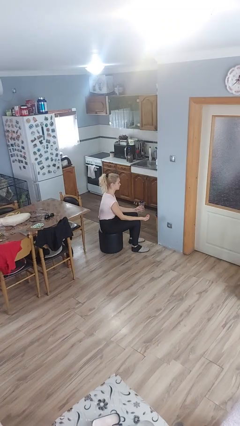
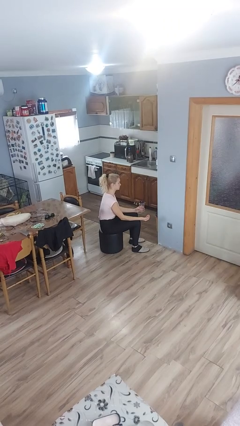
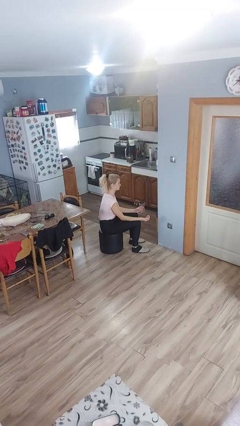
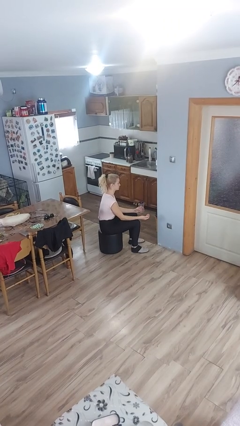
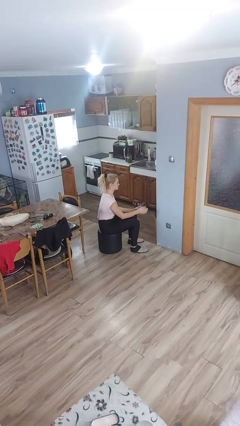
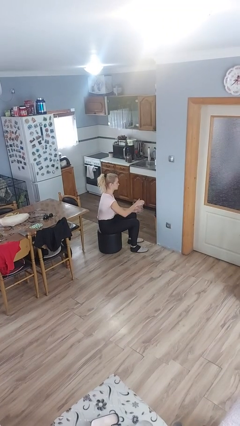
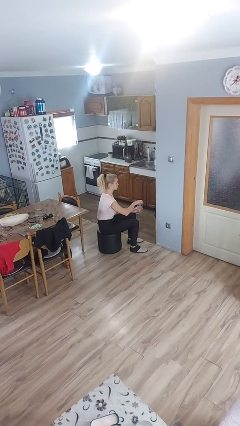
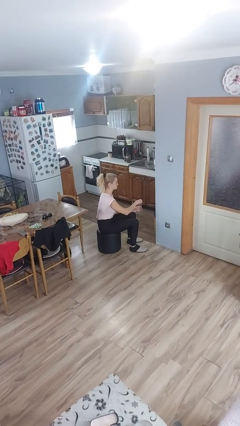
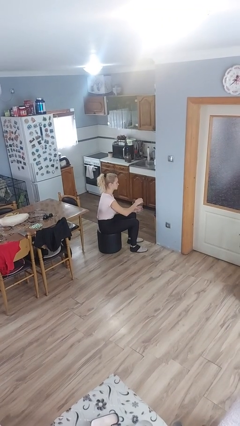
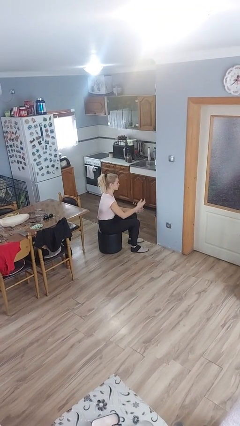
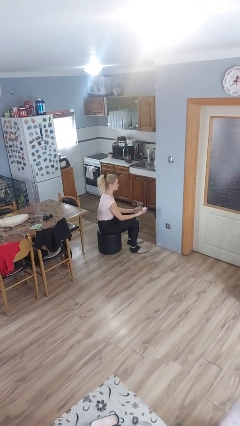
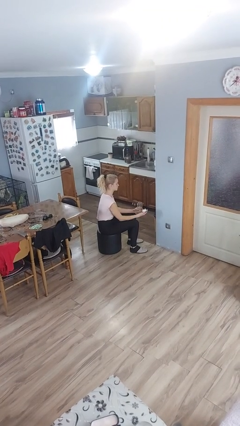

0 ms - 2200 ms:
person opens jar

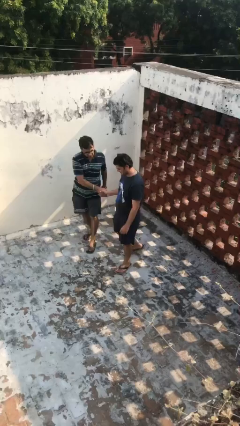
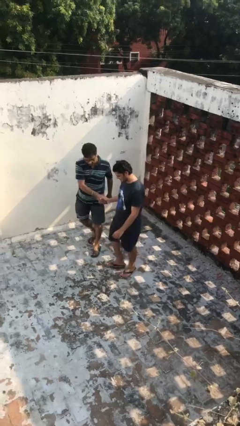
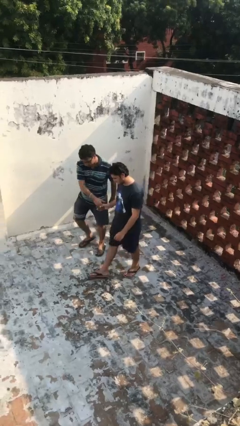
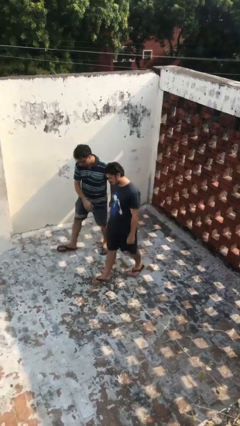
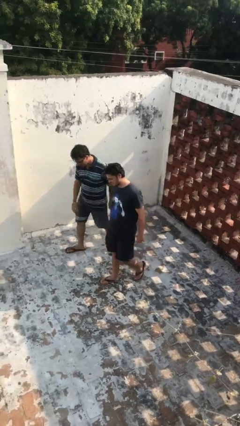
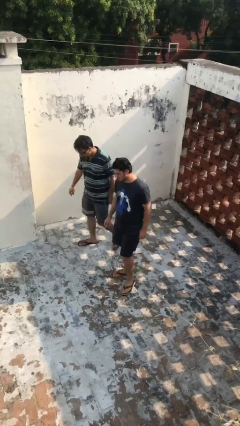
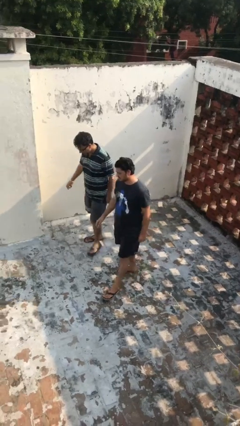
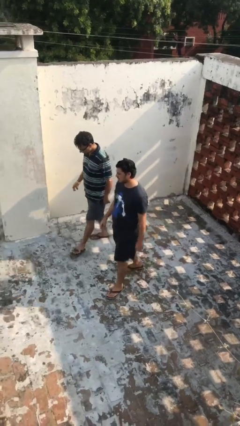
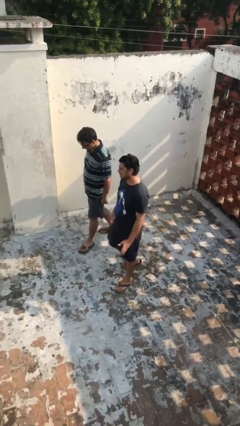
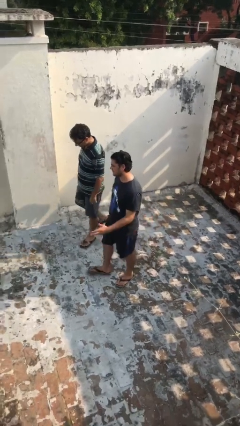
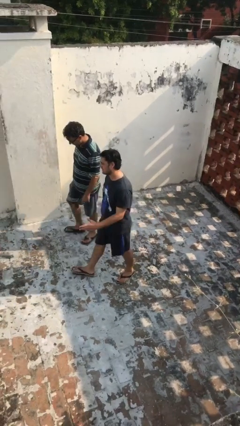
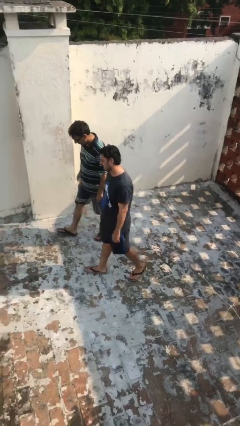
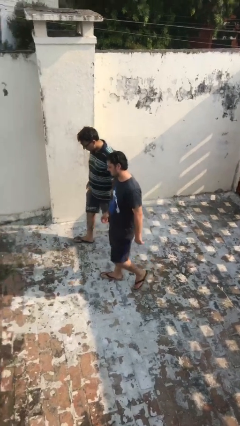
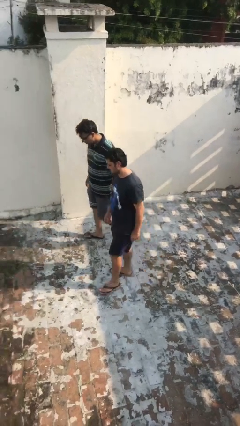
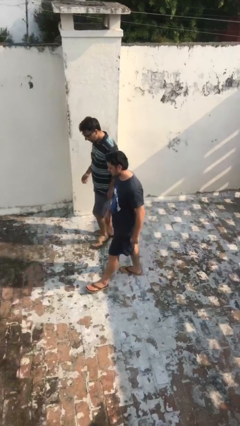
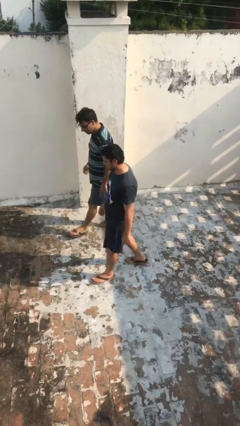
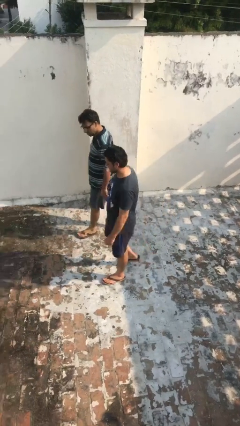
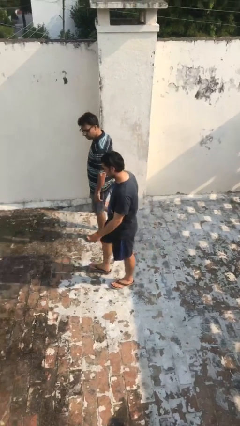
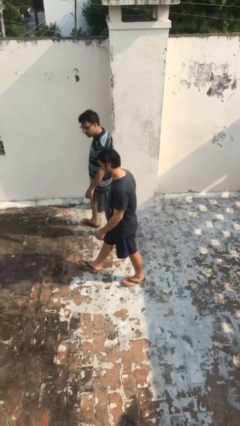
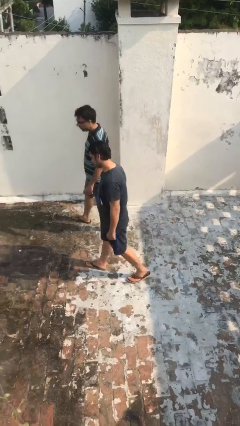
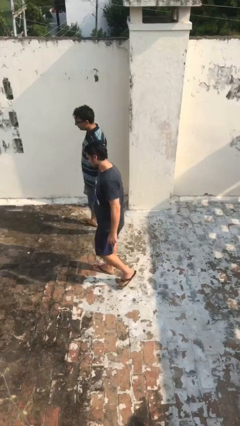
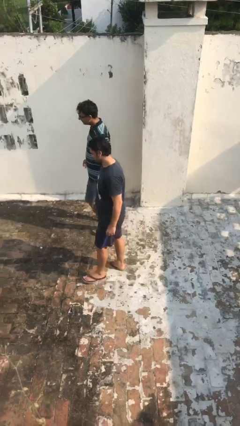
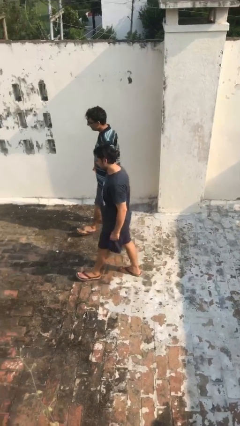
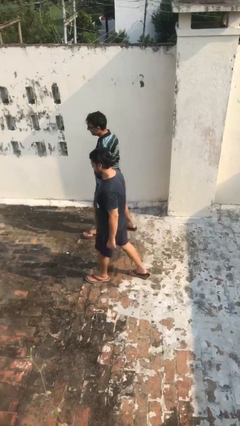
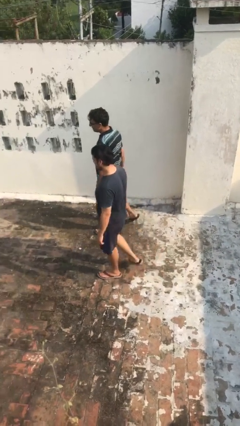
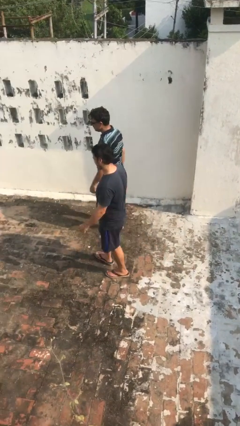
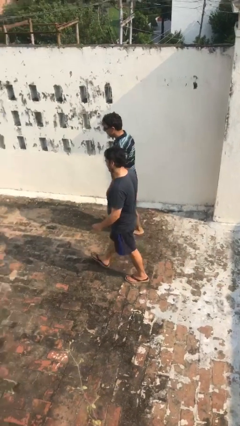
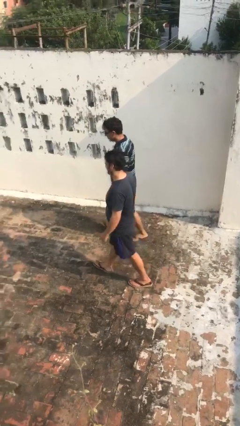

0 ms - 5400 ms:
person talks to person

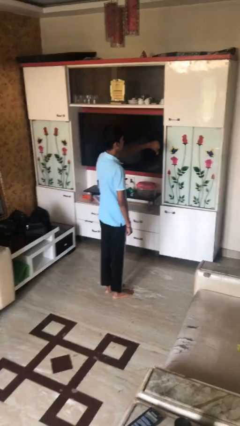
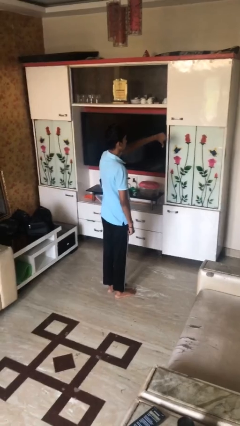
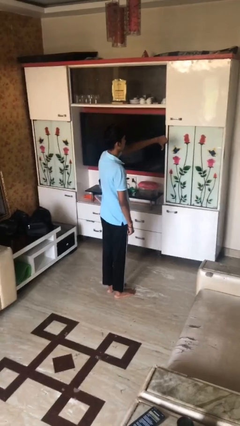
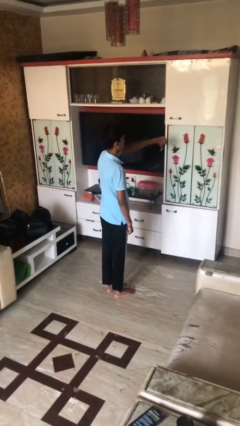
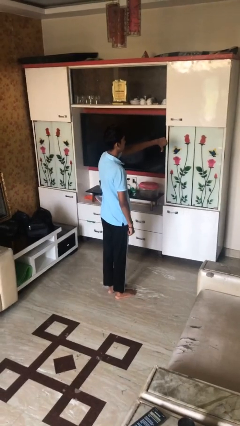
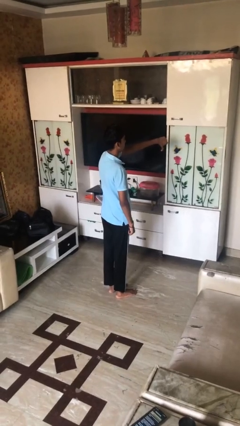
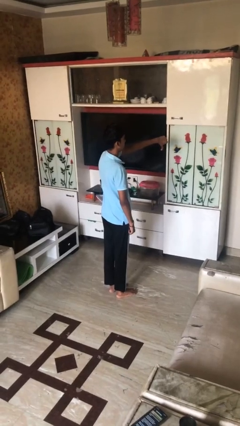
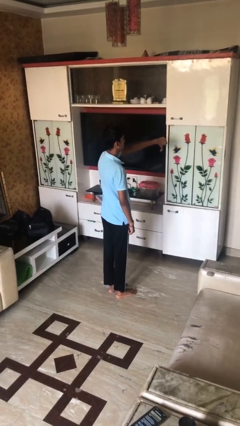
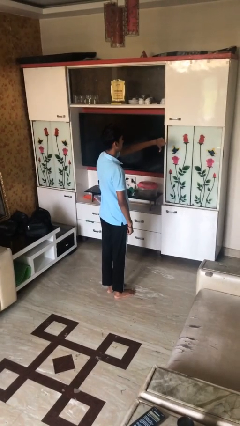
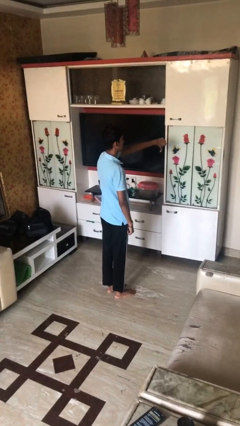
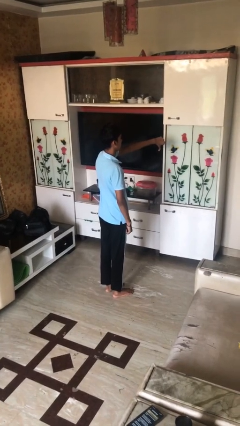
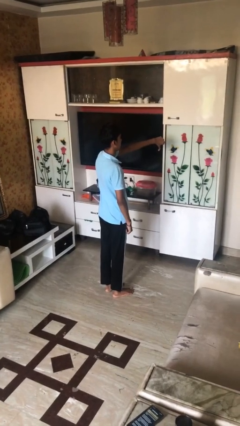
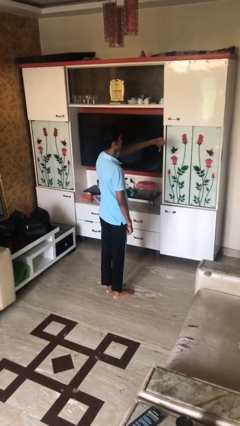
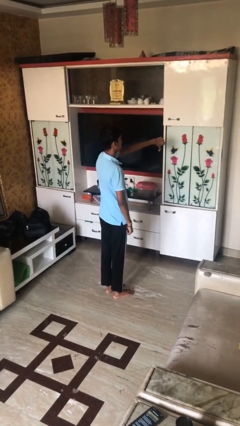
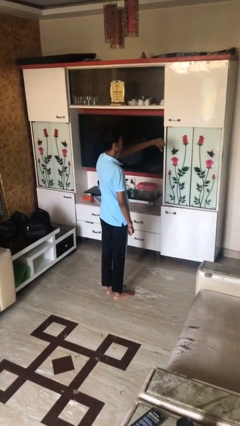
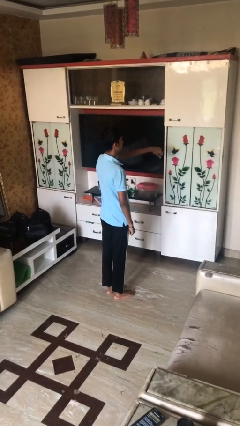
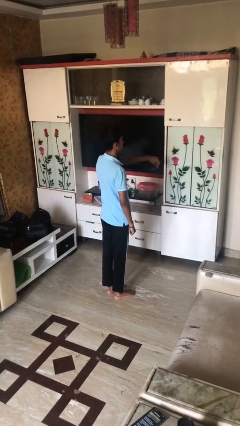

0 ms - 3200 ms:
person gestures thumbs down

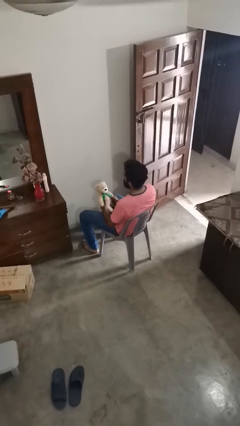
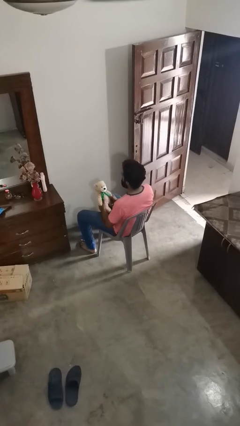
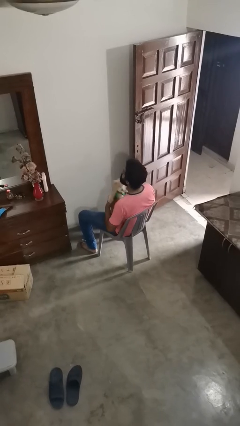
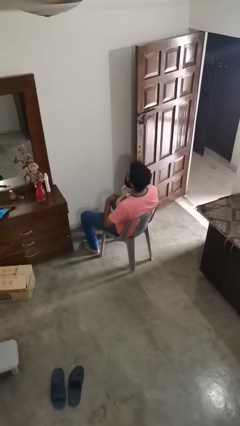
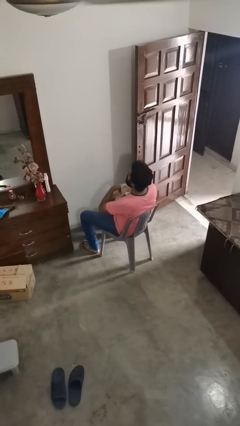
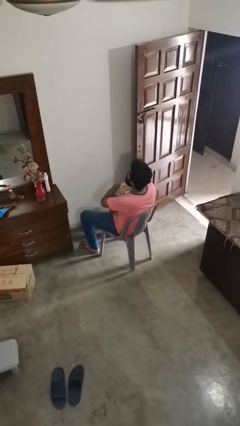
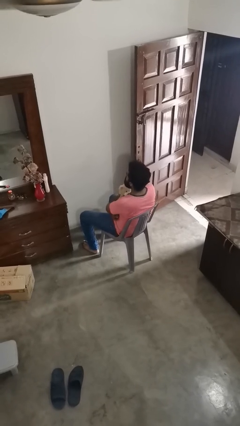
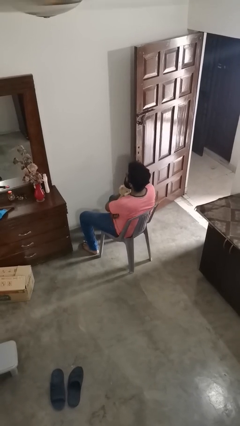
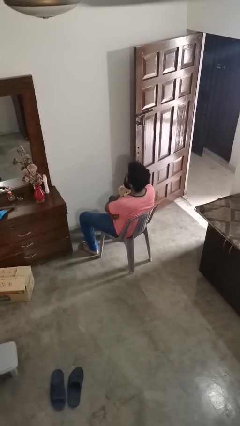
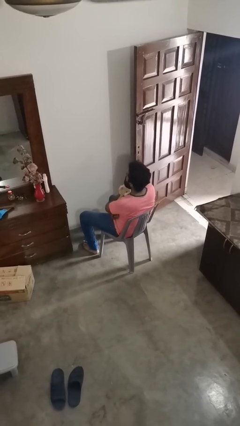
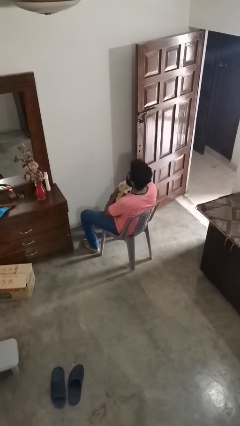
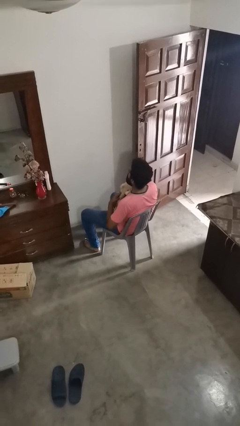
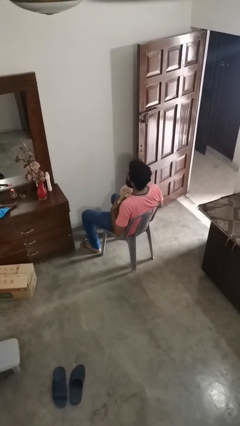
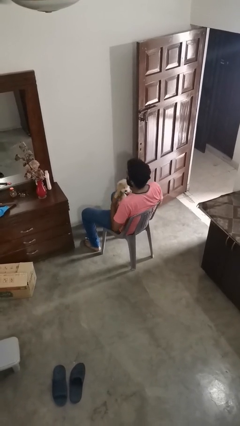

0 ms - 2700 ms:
person hugs stuffed animal

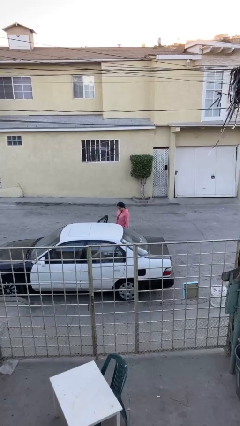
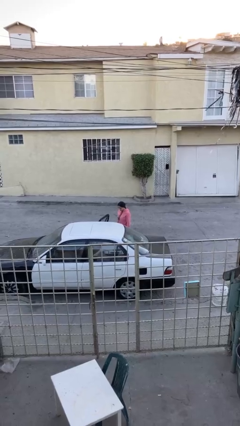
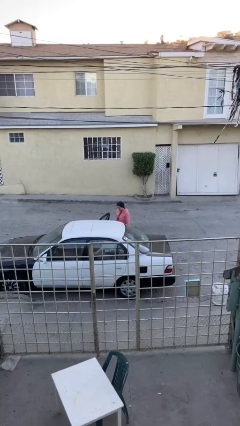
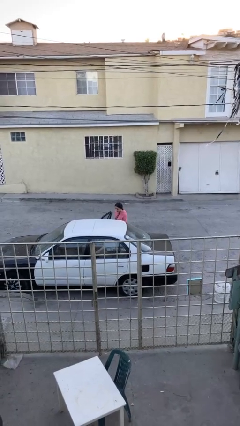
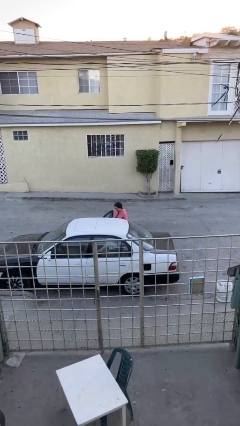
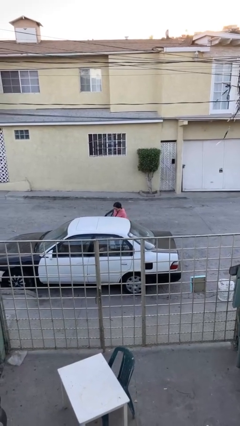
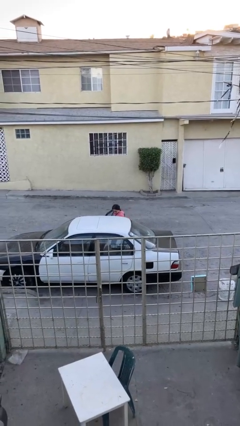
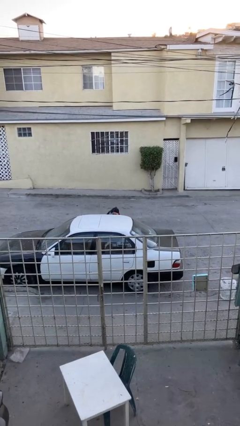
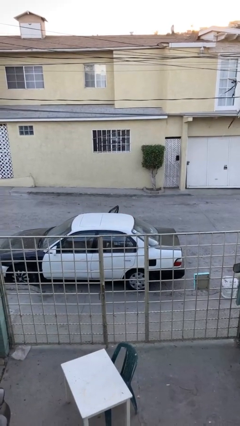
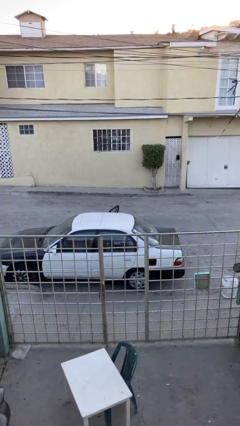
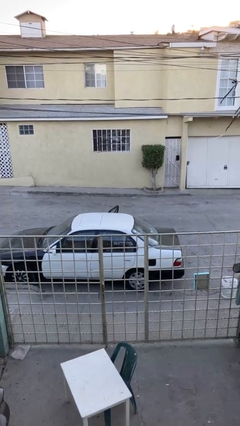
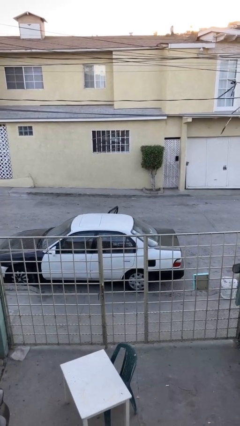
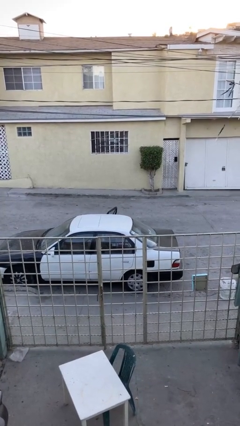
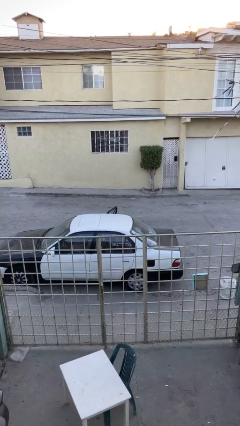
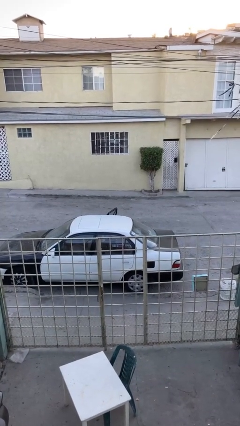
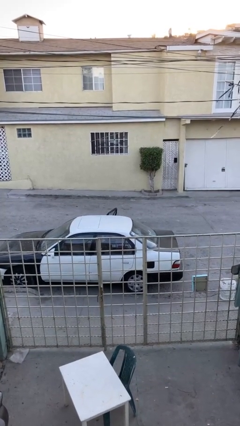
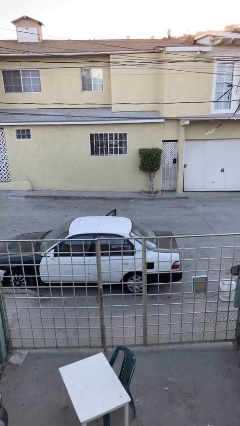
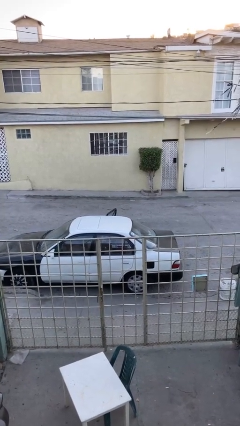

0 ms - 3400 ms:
person enters car

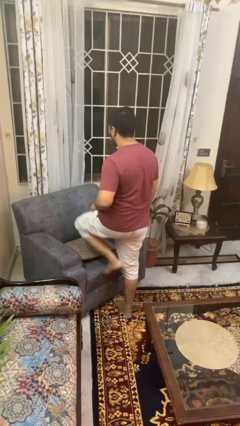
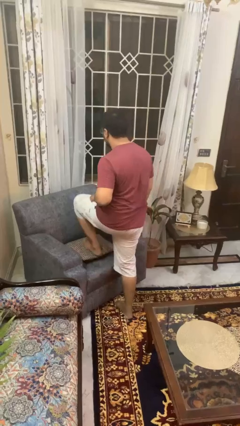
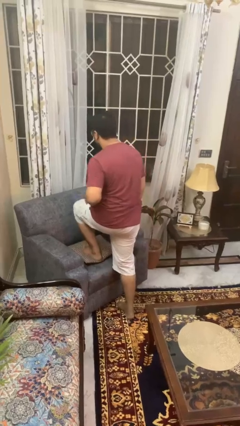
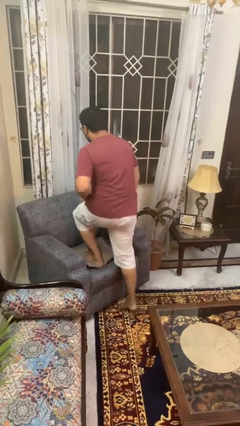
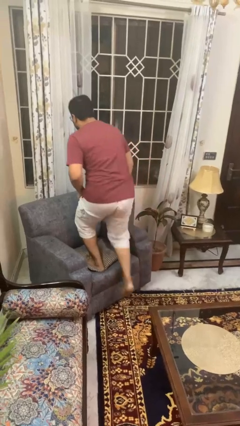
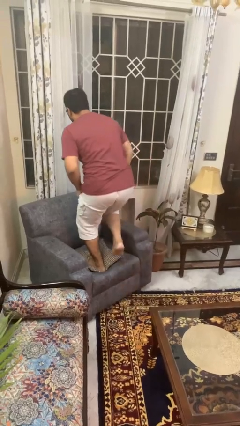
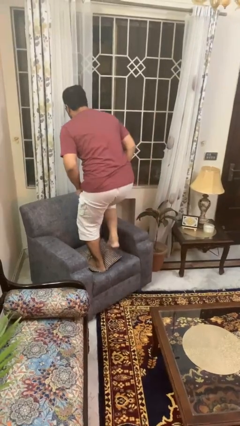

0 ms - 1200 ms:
person climbs on couch
